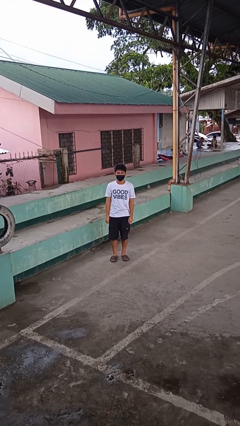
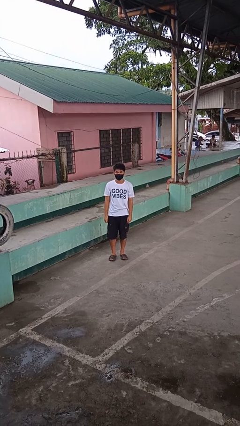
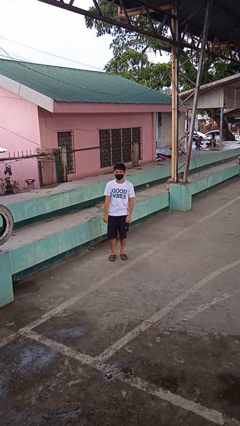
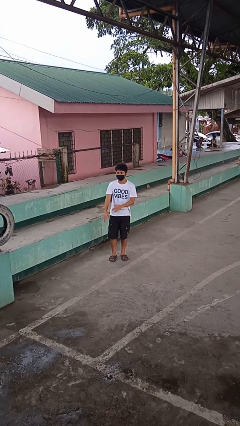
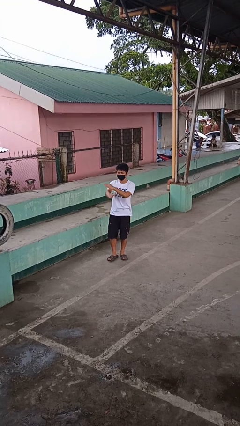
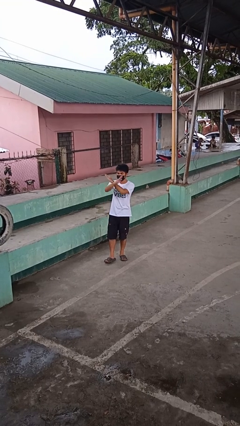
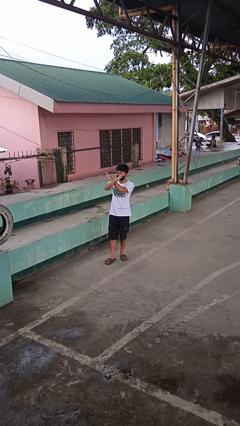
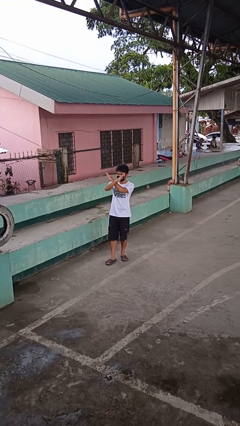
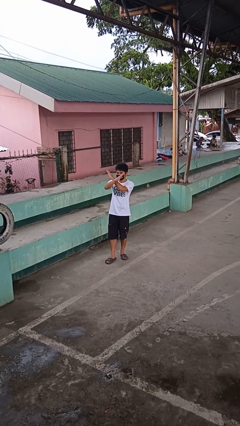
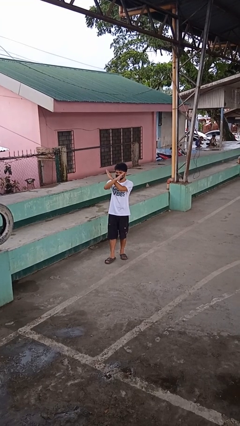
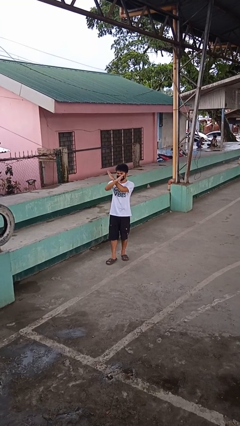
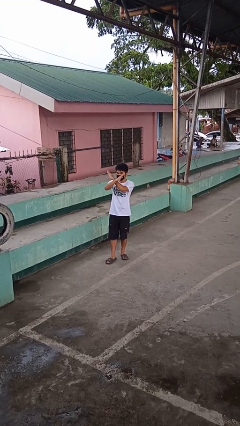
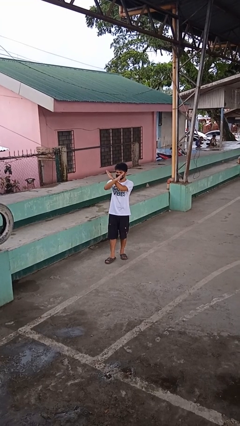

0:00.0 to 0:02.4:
person gestures arms x

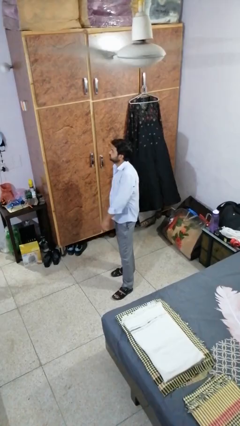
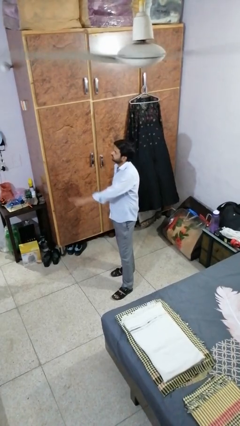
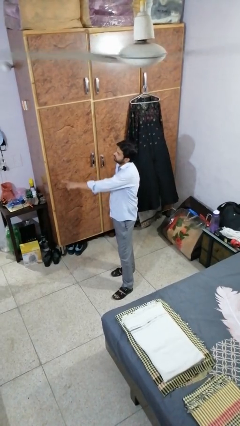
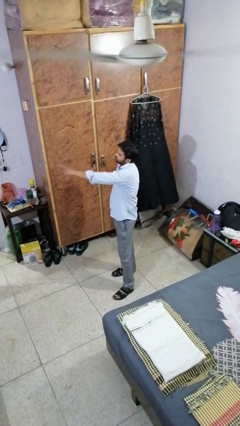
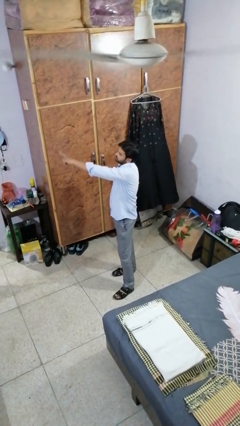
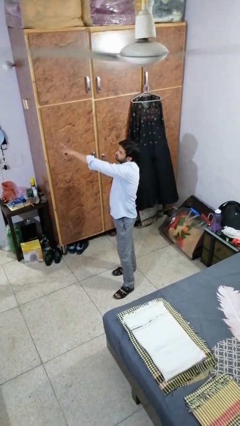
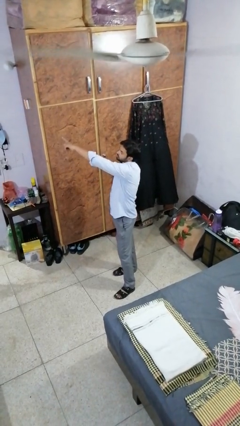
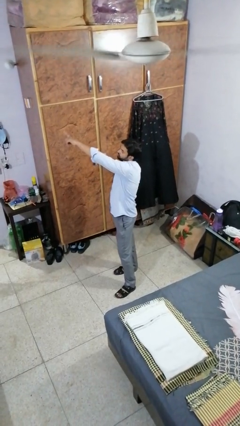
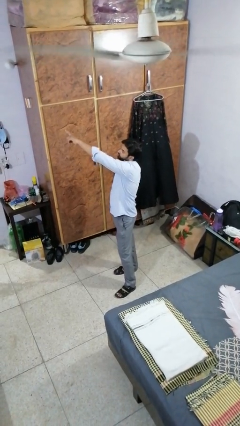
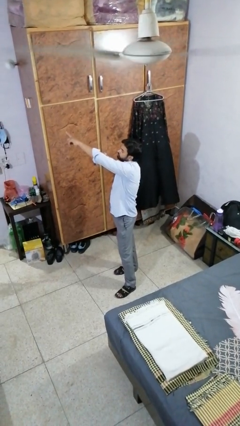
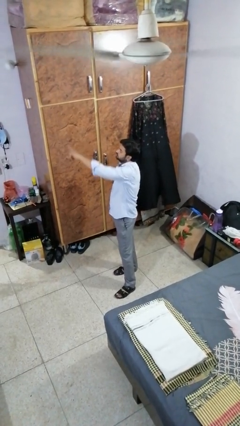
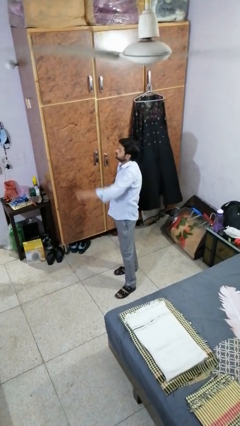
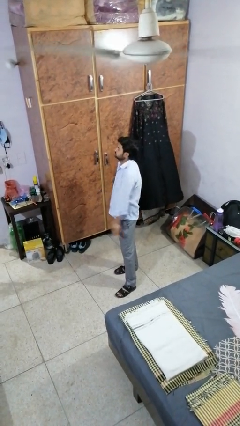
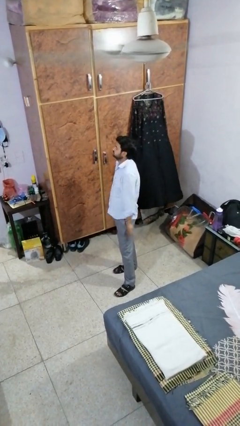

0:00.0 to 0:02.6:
person points at person

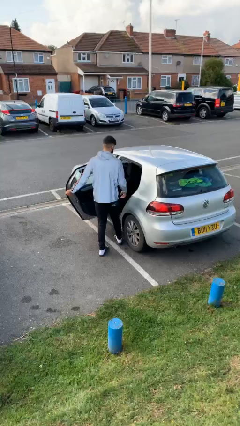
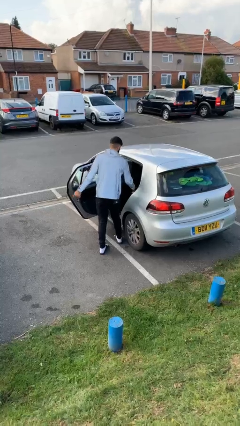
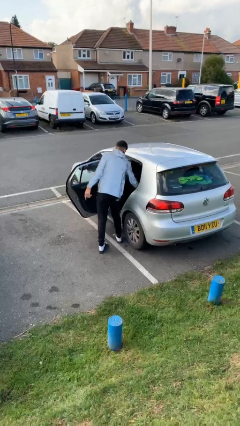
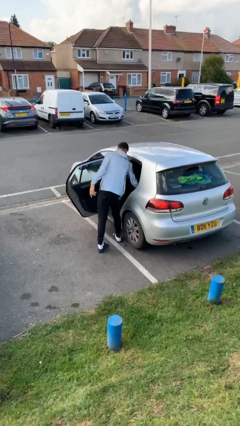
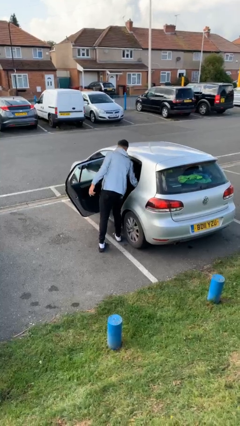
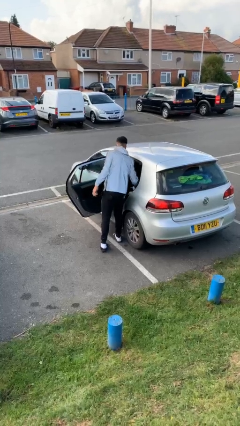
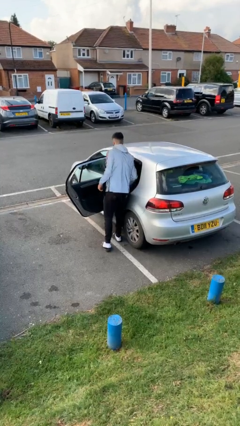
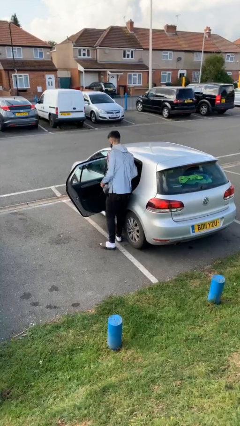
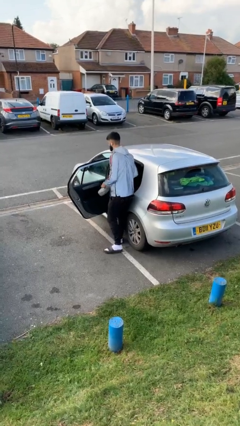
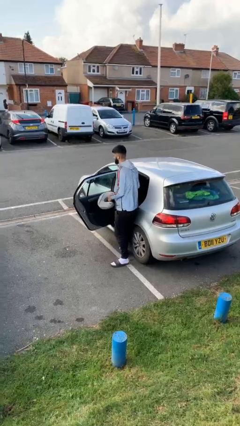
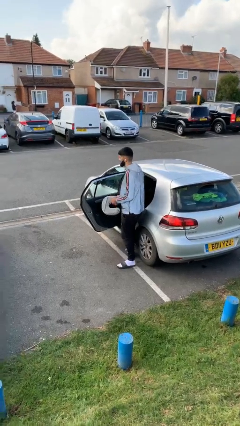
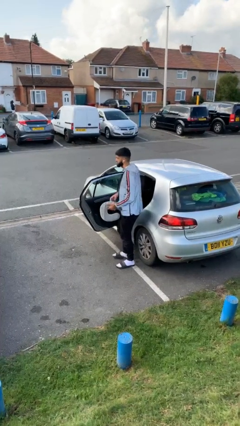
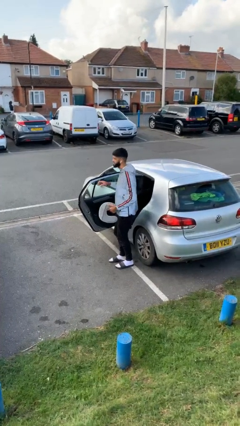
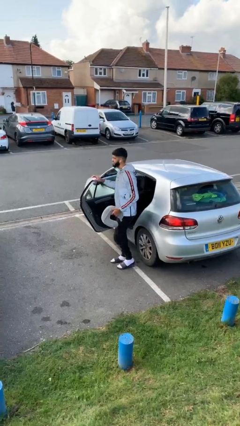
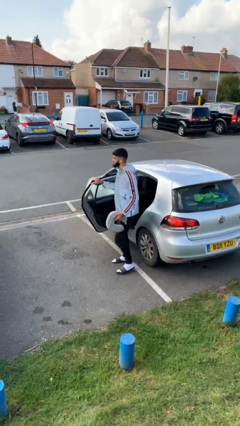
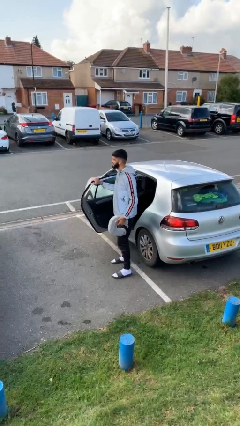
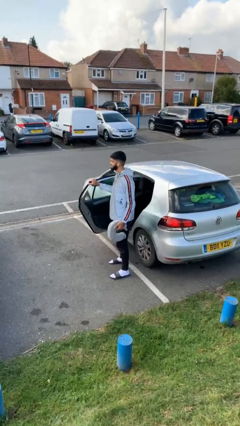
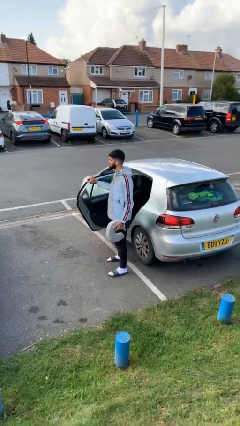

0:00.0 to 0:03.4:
person unloads car

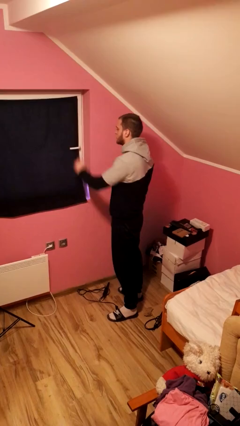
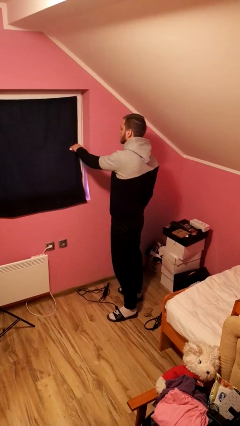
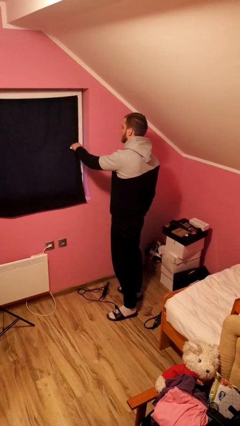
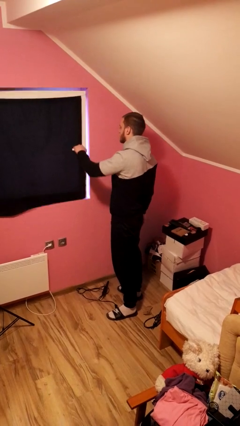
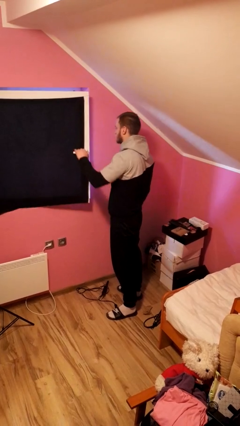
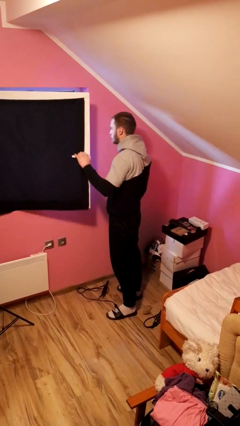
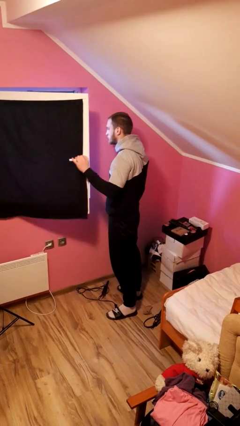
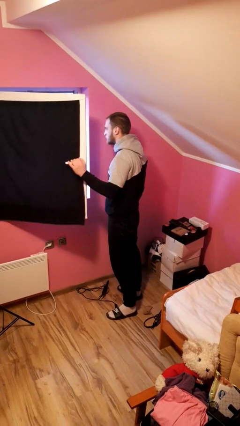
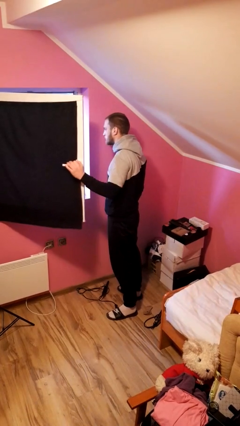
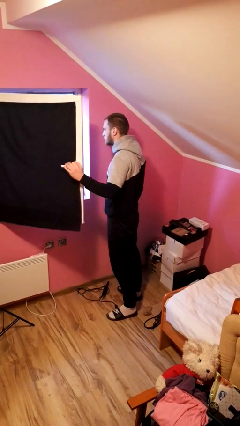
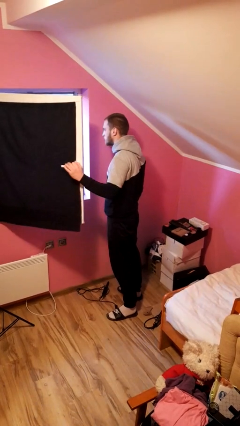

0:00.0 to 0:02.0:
person opens home window

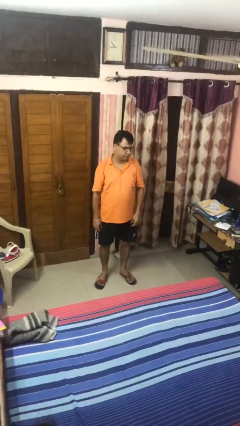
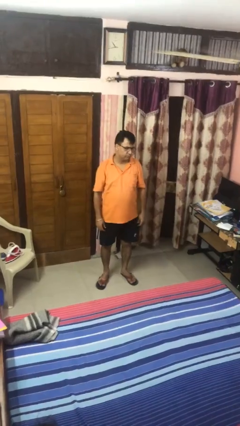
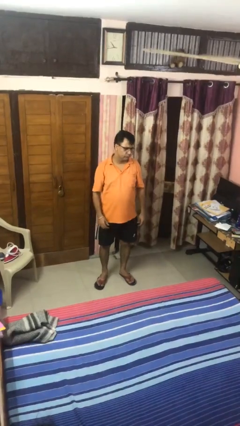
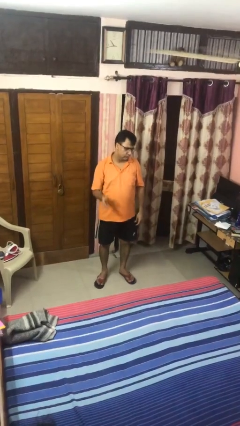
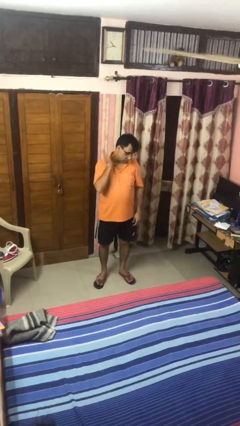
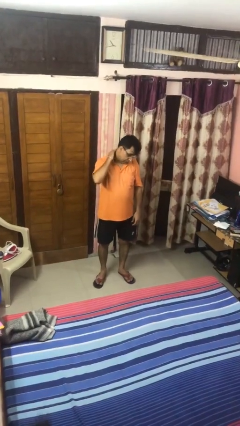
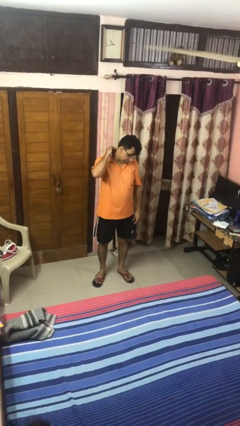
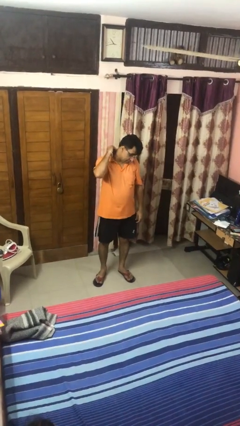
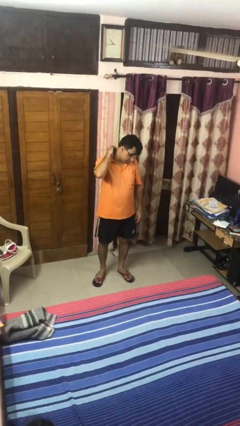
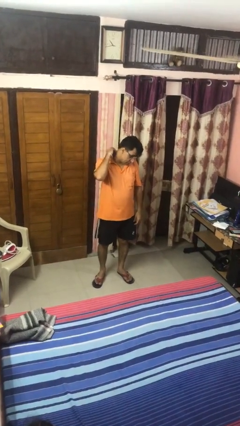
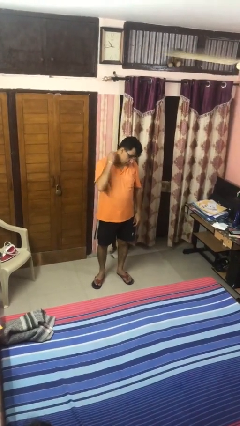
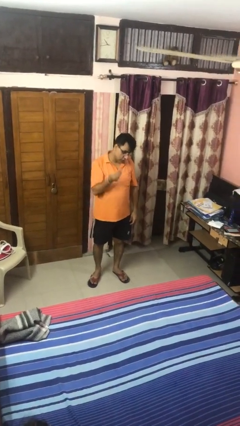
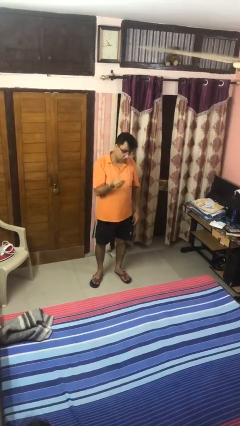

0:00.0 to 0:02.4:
person swats bug

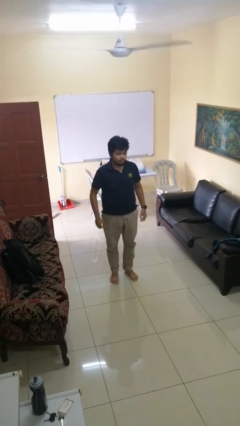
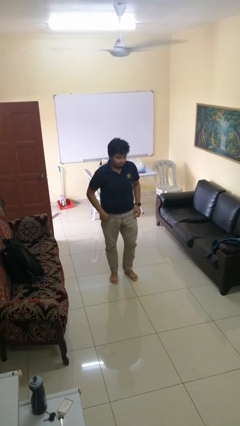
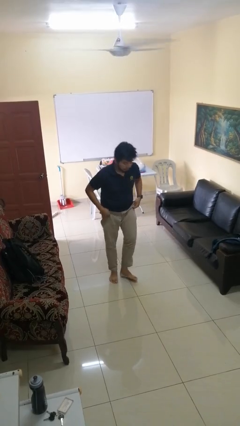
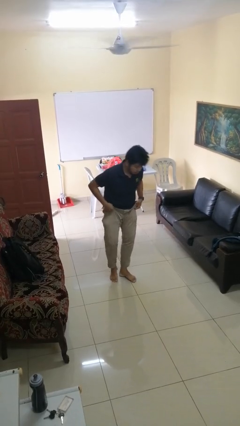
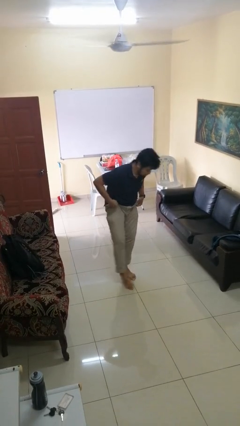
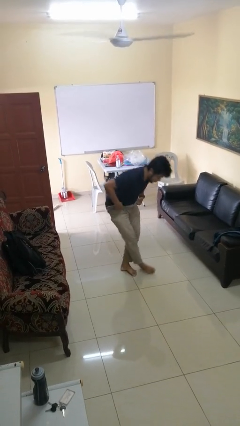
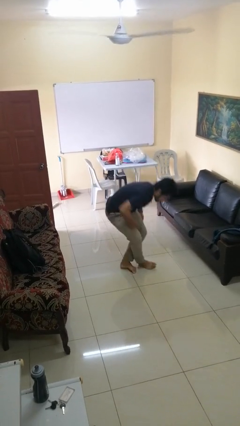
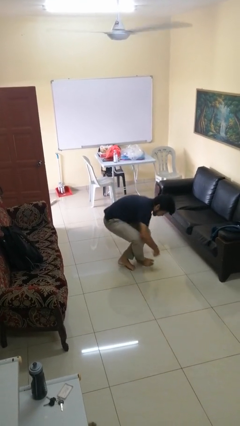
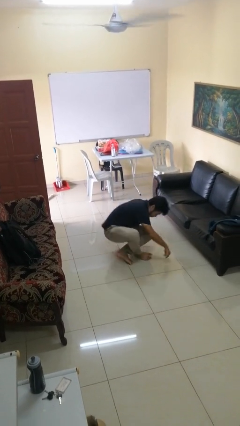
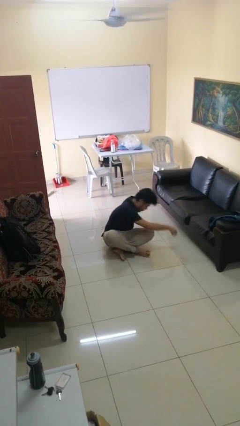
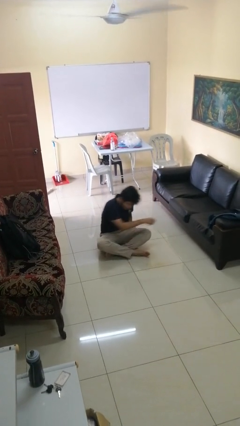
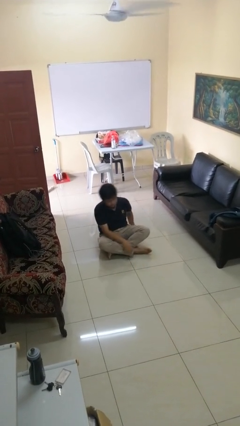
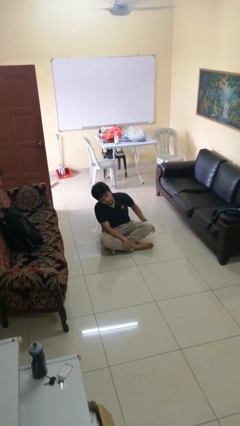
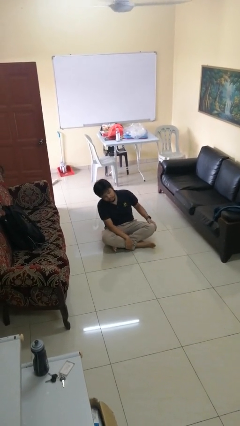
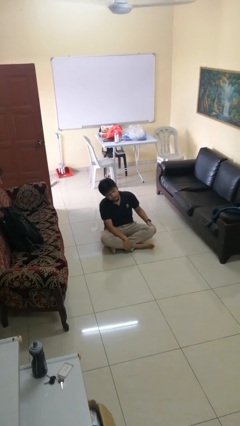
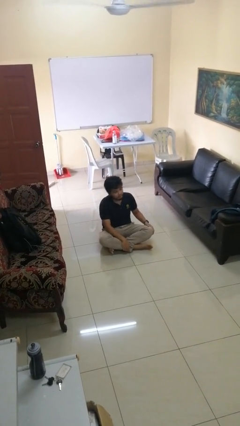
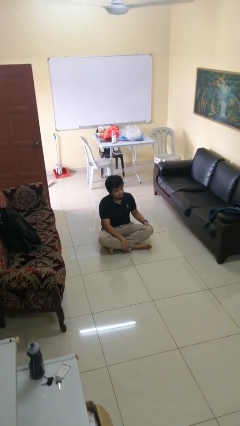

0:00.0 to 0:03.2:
person sits crisscross

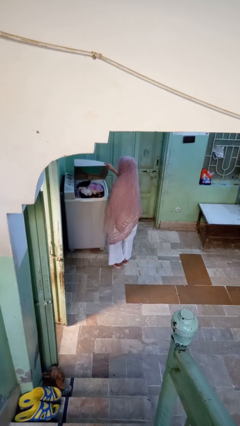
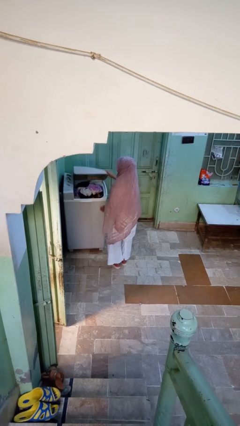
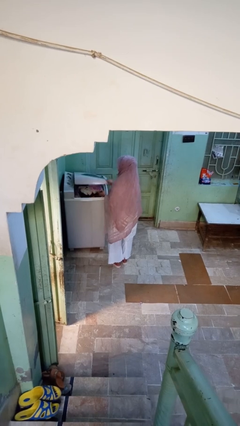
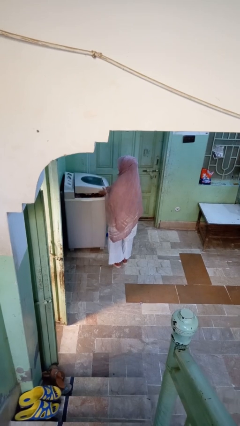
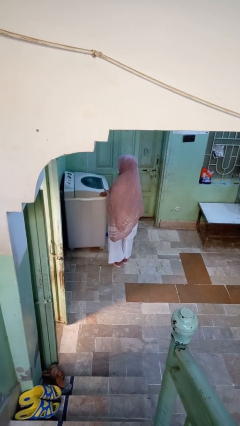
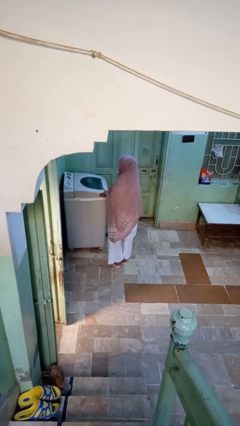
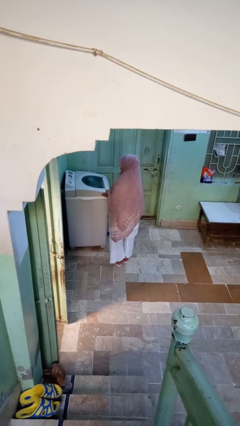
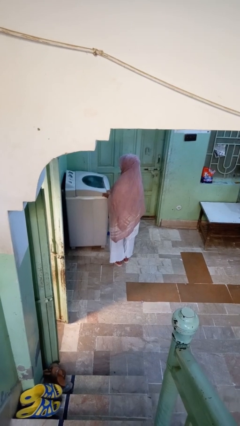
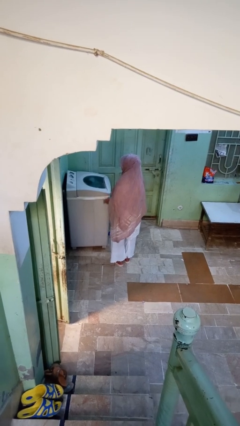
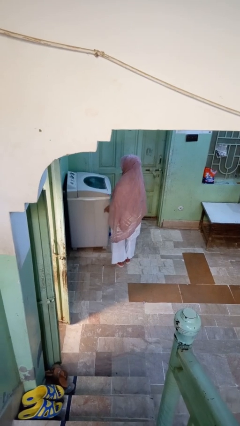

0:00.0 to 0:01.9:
person closes clothes washer
